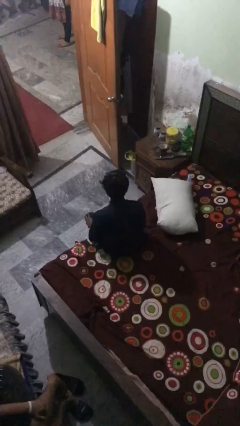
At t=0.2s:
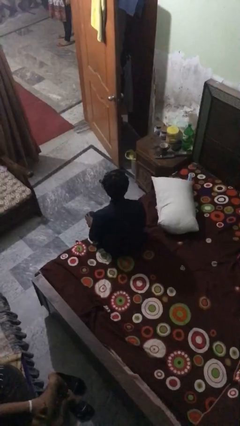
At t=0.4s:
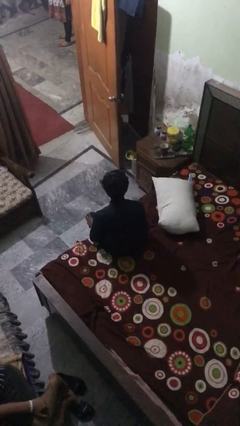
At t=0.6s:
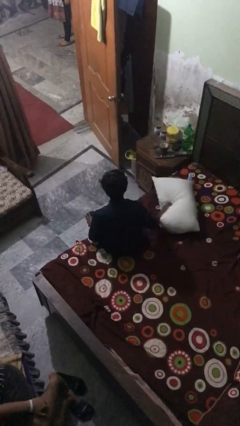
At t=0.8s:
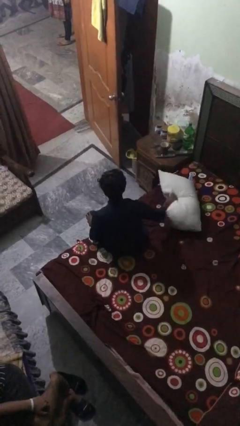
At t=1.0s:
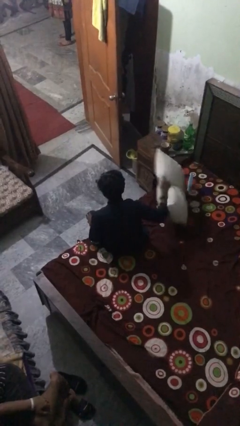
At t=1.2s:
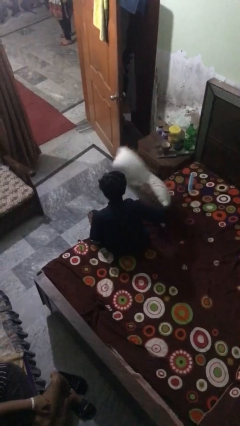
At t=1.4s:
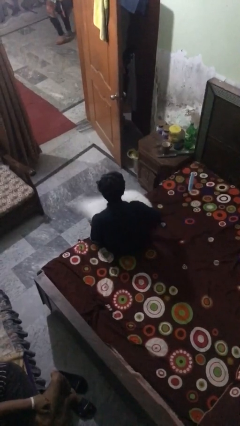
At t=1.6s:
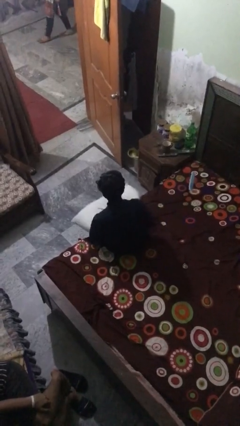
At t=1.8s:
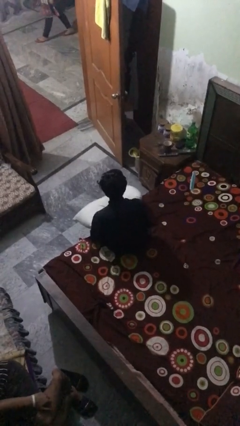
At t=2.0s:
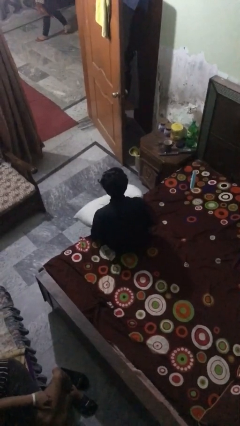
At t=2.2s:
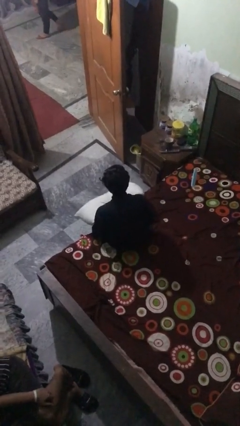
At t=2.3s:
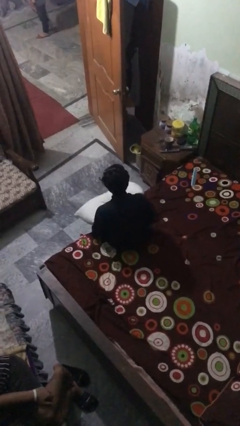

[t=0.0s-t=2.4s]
person picks up object from bed

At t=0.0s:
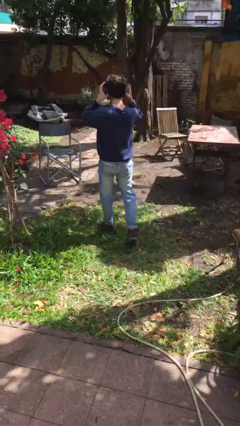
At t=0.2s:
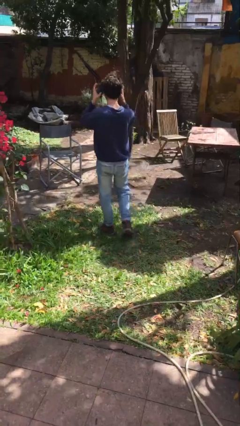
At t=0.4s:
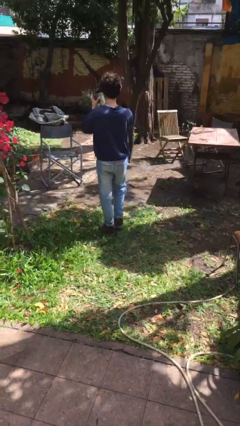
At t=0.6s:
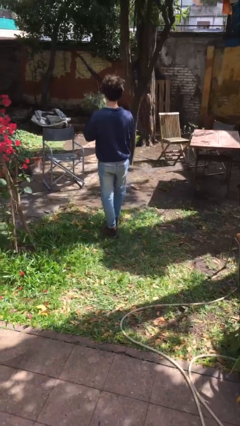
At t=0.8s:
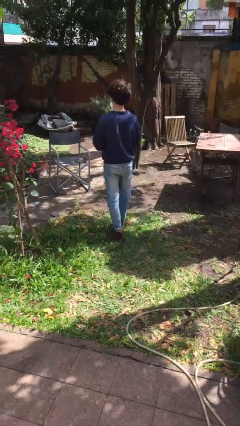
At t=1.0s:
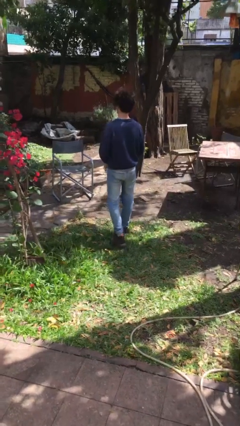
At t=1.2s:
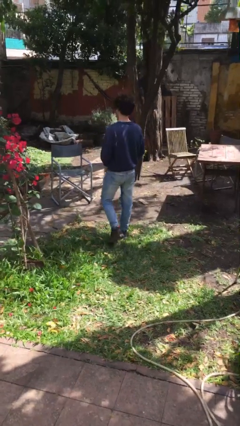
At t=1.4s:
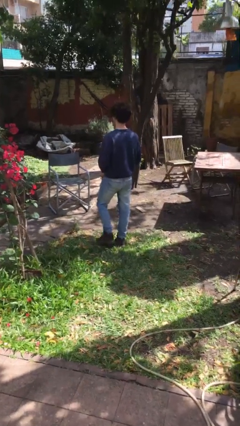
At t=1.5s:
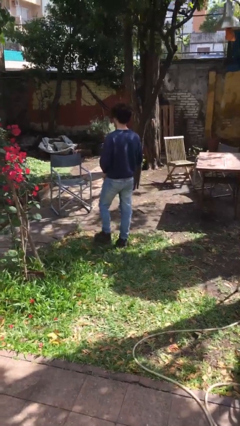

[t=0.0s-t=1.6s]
person takes off headphones

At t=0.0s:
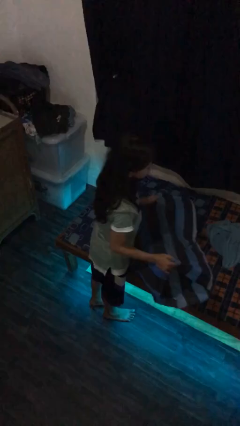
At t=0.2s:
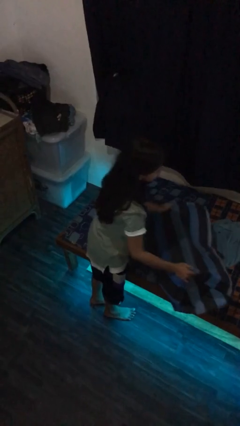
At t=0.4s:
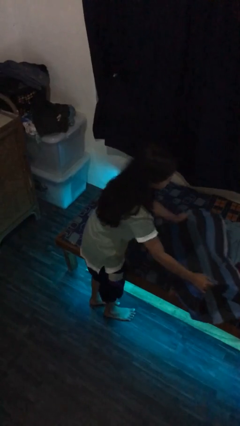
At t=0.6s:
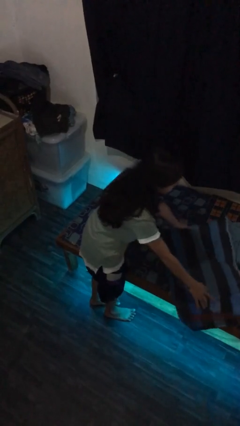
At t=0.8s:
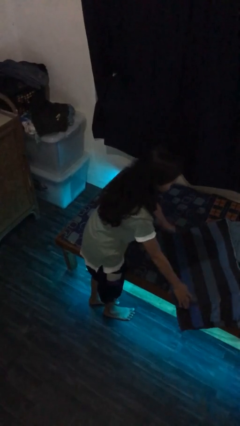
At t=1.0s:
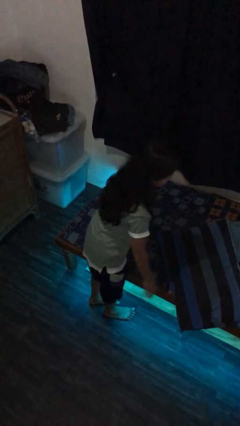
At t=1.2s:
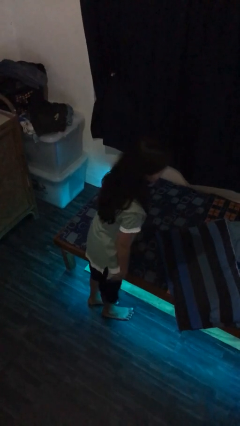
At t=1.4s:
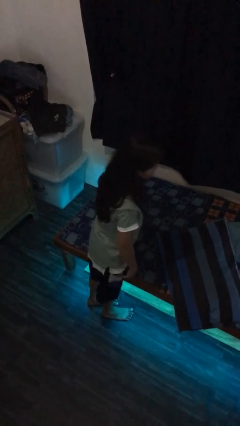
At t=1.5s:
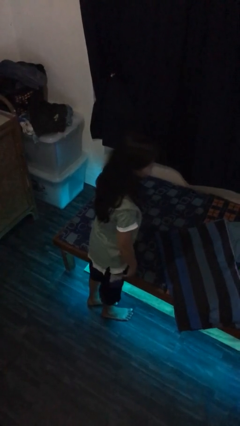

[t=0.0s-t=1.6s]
person puts down object on bed

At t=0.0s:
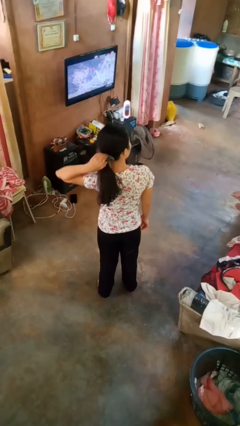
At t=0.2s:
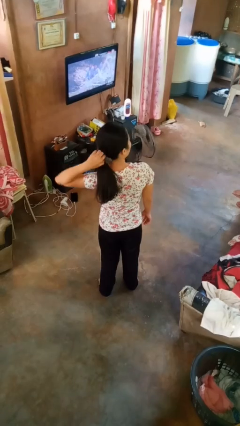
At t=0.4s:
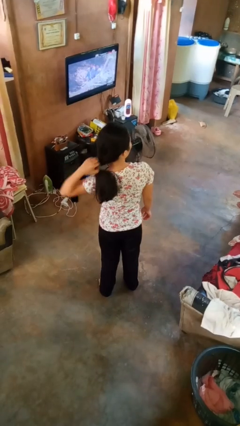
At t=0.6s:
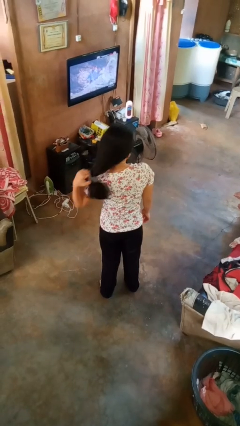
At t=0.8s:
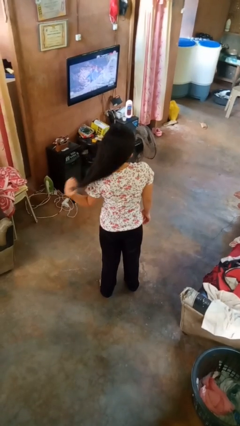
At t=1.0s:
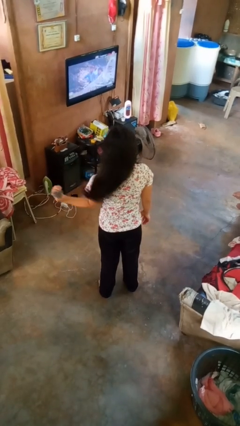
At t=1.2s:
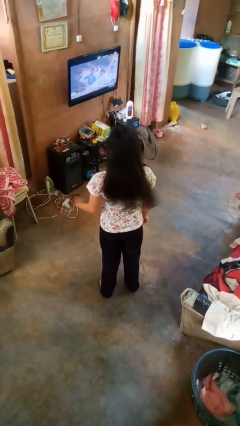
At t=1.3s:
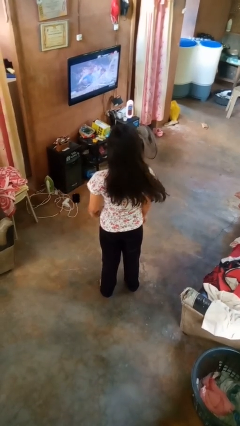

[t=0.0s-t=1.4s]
person takes off hairtie

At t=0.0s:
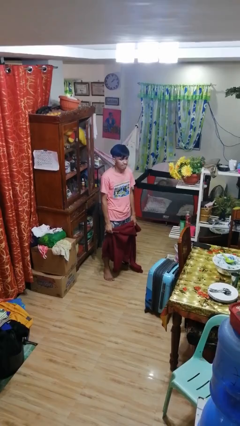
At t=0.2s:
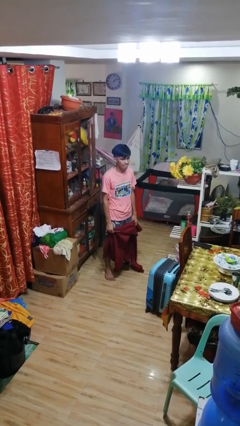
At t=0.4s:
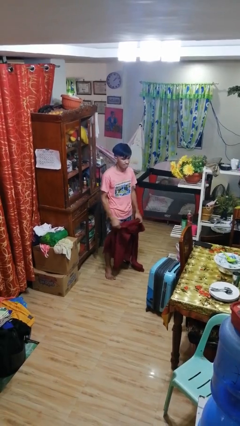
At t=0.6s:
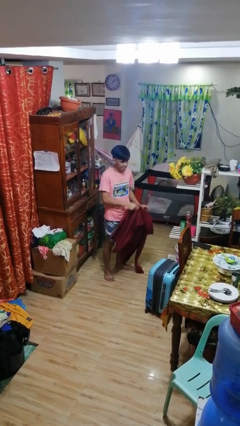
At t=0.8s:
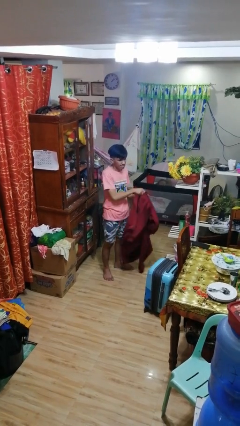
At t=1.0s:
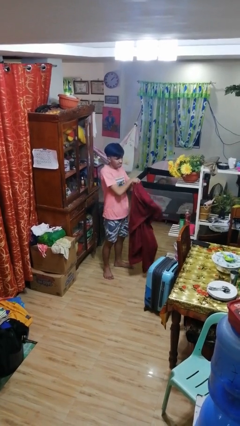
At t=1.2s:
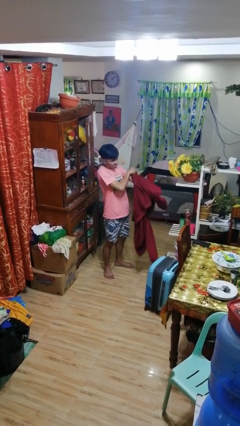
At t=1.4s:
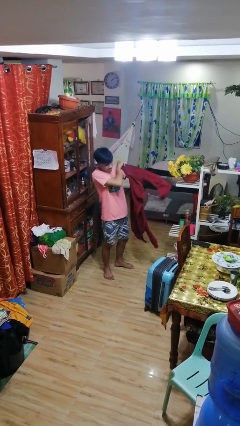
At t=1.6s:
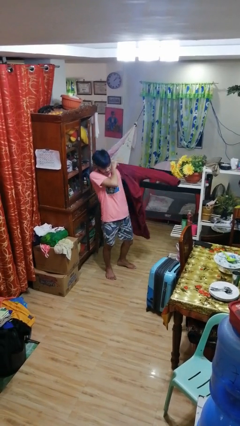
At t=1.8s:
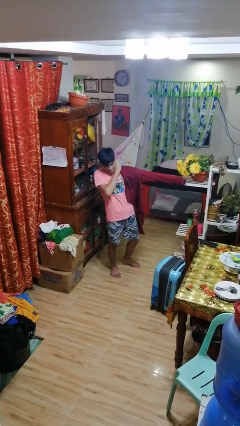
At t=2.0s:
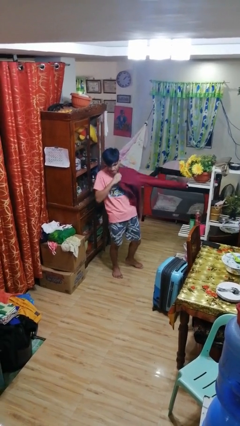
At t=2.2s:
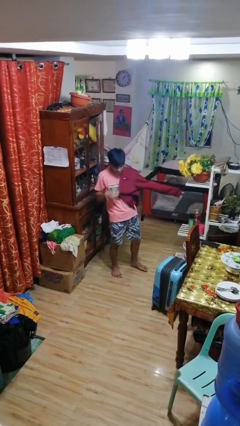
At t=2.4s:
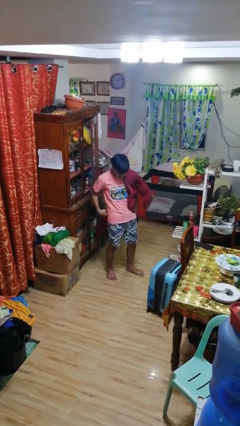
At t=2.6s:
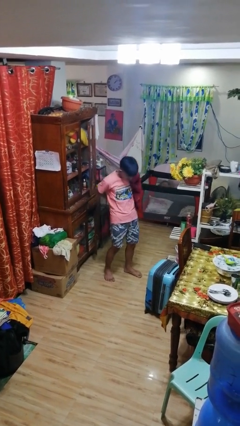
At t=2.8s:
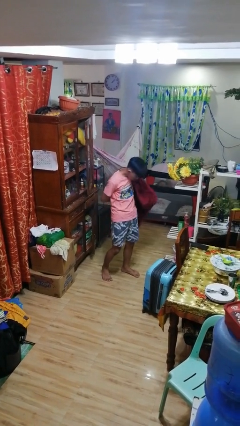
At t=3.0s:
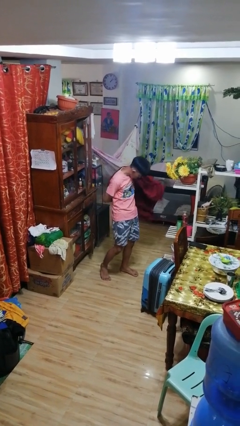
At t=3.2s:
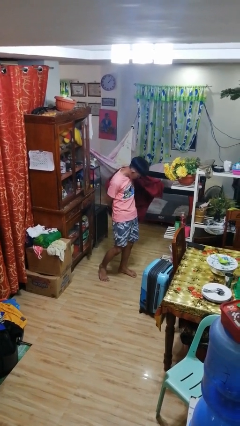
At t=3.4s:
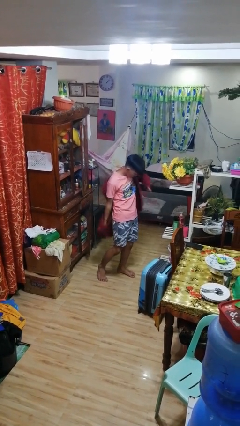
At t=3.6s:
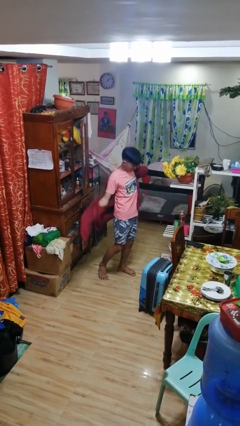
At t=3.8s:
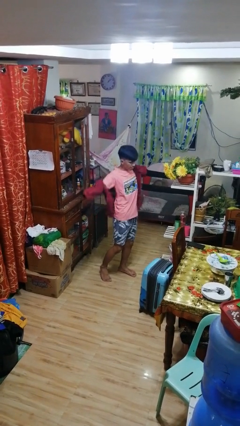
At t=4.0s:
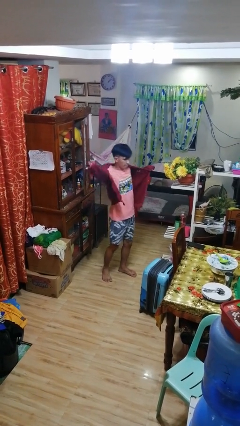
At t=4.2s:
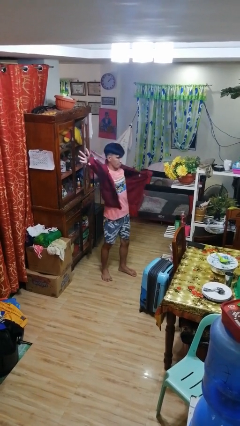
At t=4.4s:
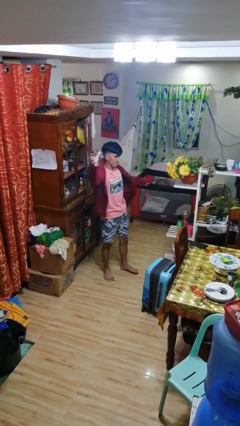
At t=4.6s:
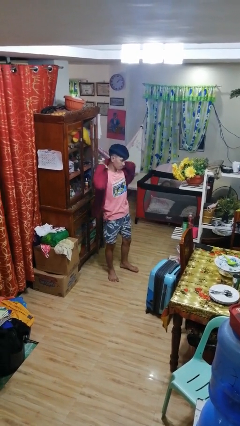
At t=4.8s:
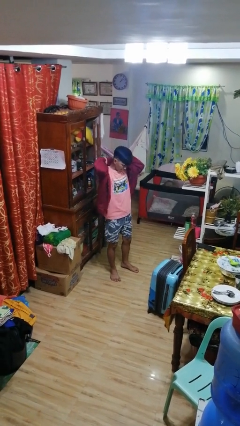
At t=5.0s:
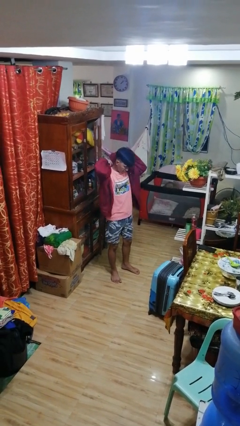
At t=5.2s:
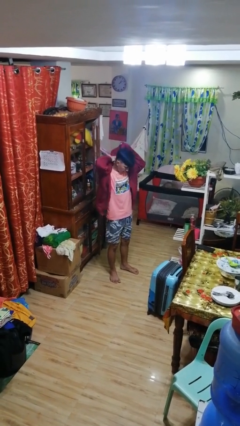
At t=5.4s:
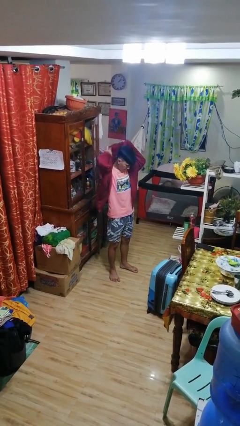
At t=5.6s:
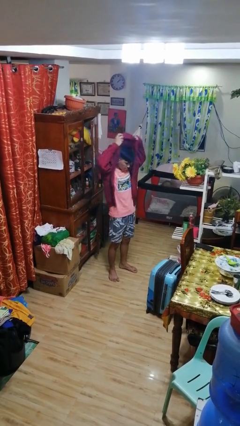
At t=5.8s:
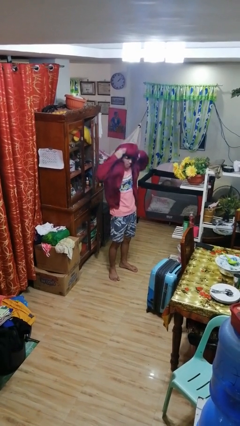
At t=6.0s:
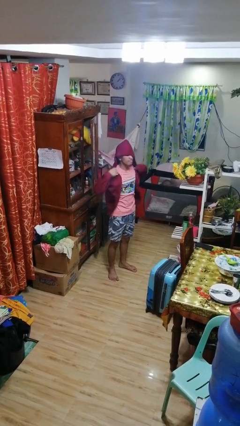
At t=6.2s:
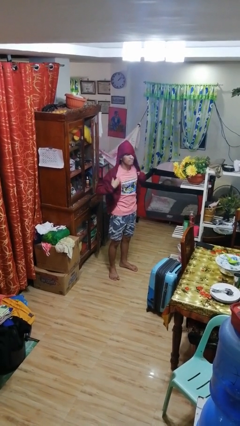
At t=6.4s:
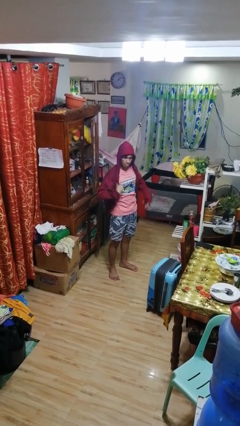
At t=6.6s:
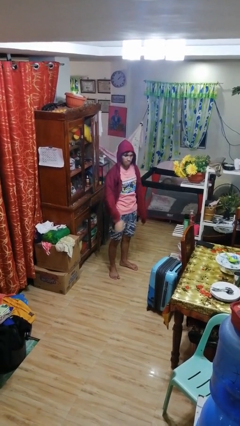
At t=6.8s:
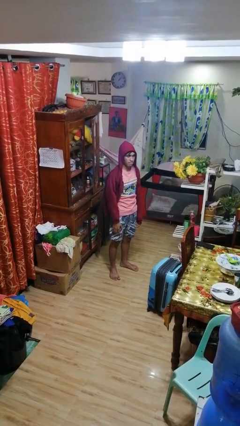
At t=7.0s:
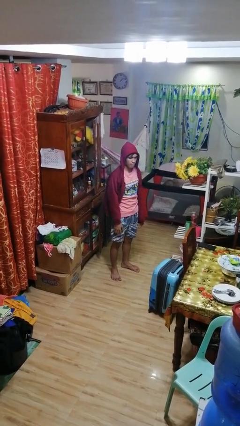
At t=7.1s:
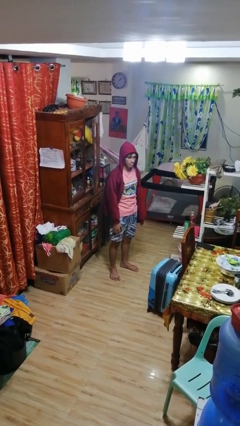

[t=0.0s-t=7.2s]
person puts on hoodie

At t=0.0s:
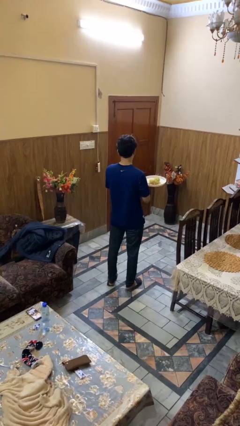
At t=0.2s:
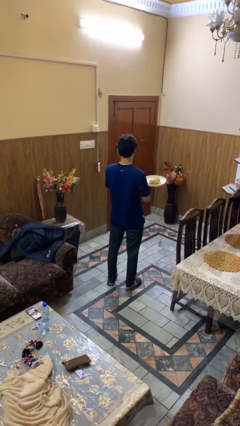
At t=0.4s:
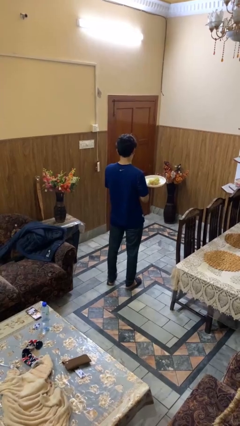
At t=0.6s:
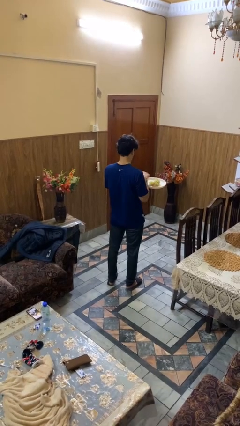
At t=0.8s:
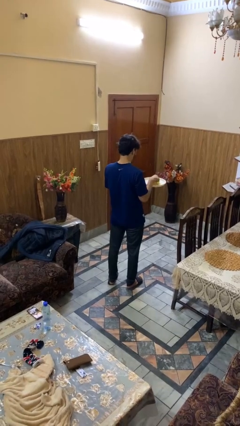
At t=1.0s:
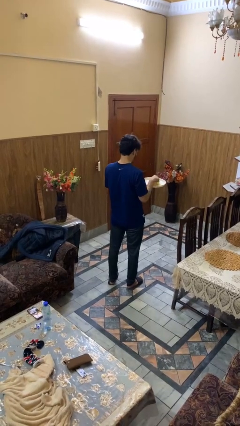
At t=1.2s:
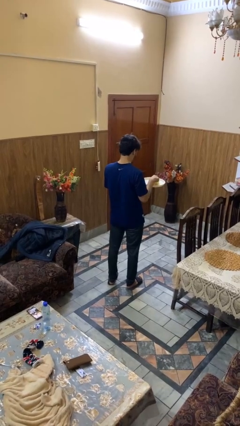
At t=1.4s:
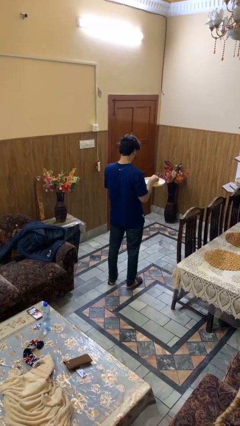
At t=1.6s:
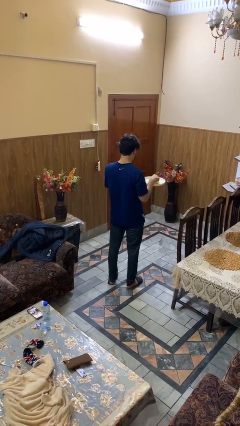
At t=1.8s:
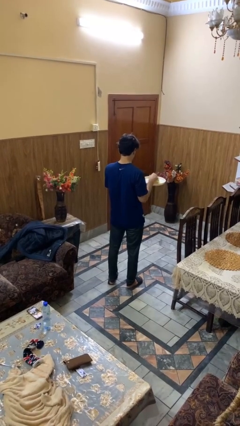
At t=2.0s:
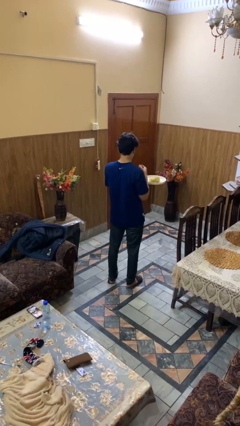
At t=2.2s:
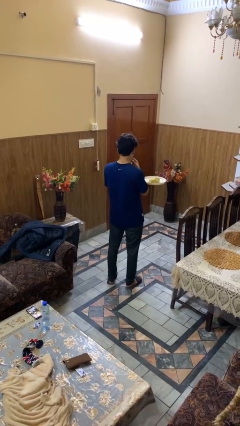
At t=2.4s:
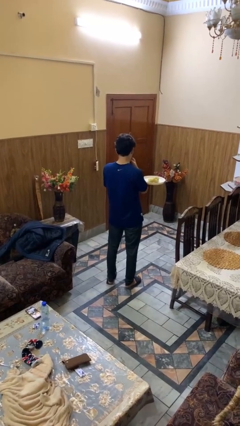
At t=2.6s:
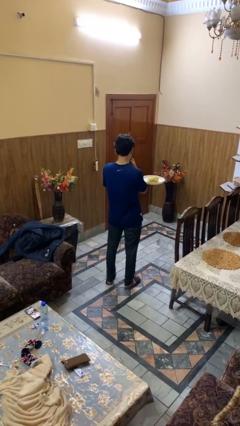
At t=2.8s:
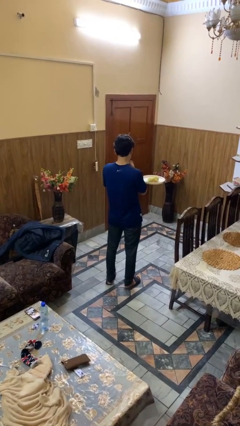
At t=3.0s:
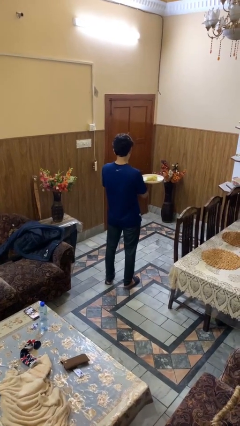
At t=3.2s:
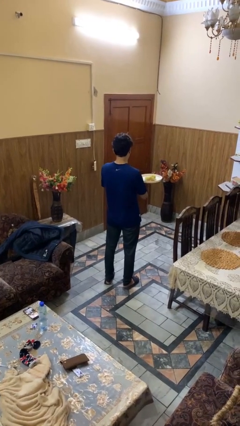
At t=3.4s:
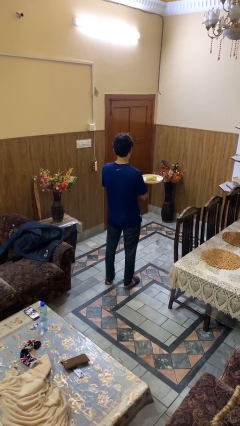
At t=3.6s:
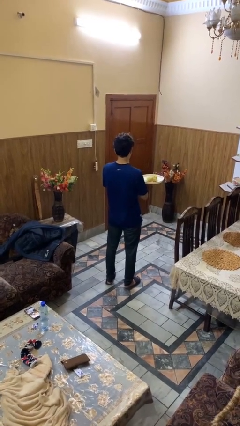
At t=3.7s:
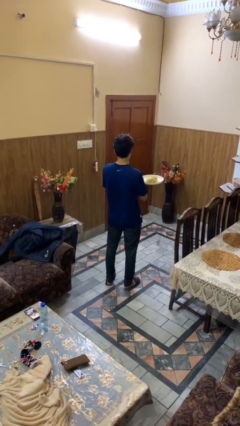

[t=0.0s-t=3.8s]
person eats with hands
